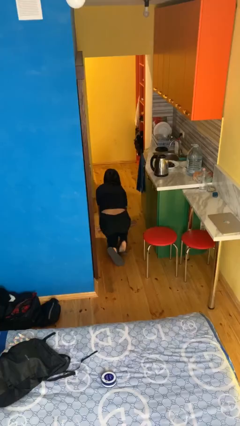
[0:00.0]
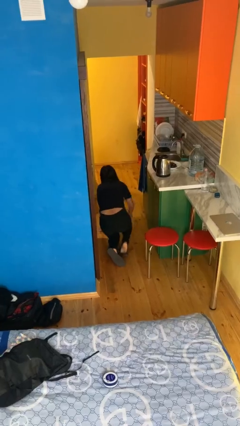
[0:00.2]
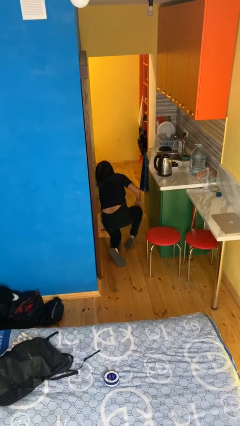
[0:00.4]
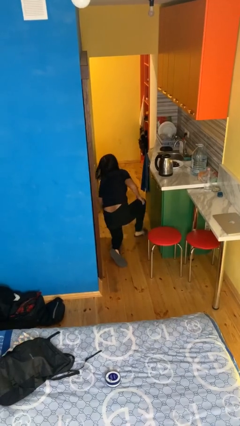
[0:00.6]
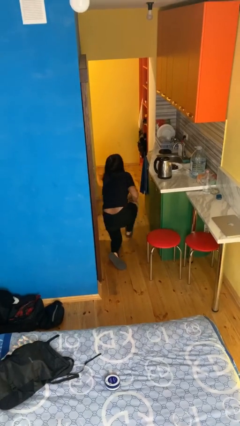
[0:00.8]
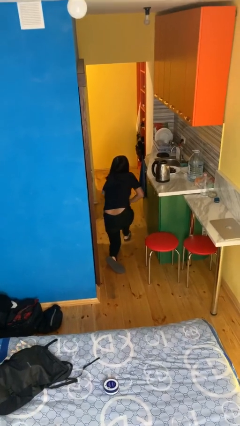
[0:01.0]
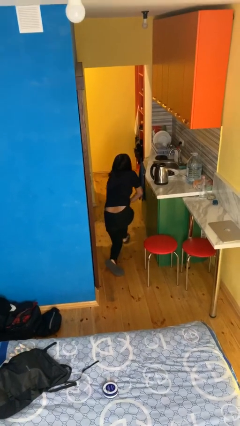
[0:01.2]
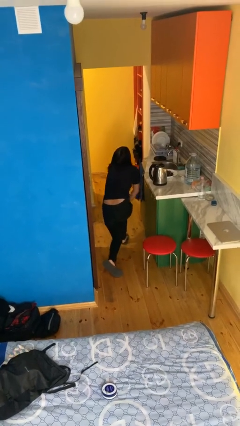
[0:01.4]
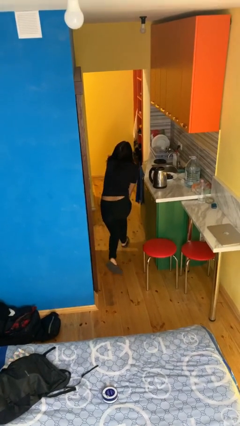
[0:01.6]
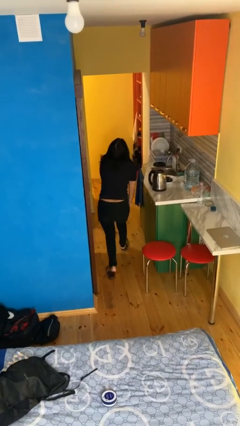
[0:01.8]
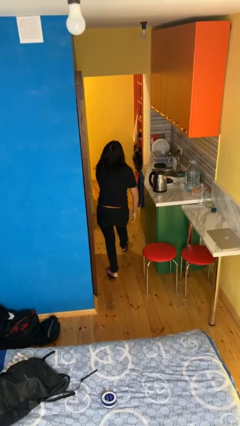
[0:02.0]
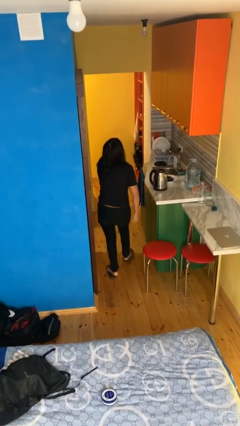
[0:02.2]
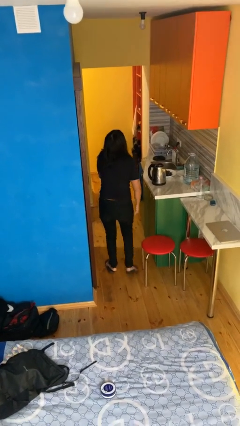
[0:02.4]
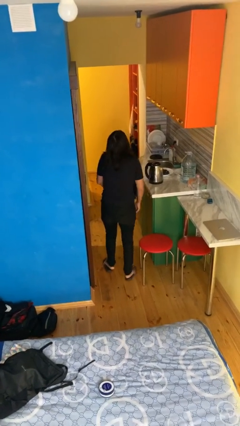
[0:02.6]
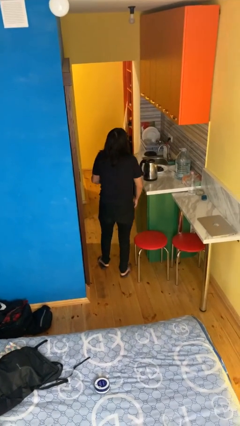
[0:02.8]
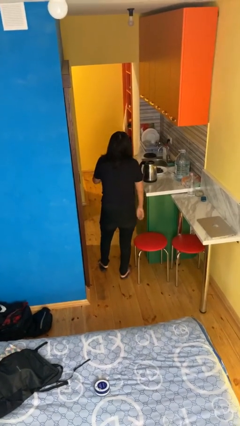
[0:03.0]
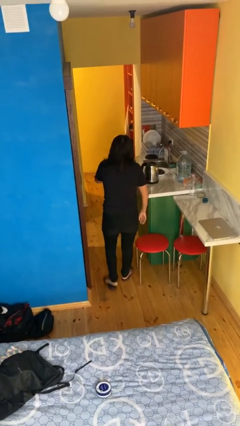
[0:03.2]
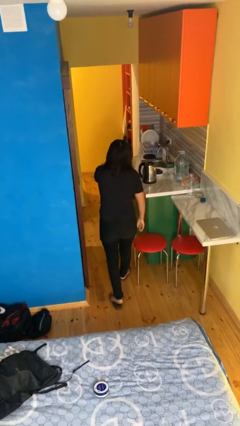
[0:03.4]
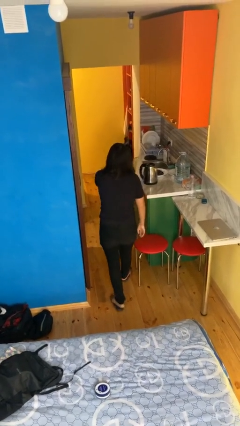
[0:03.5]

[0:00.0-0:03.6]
person stands up from floor

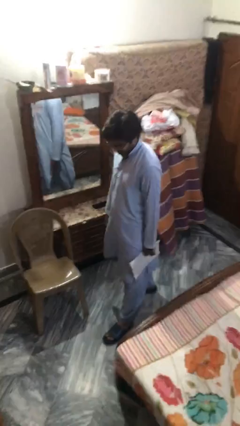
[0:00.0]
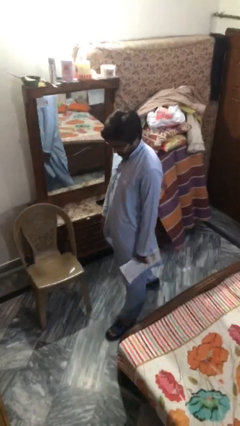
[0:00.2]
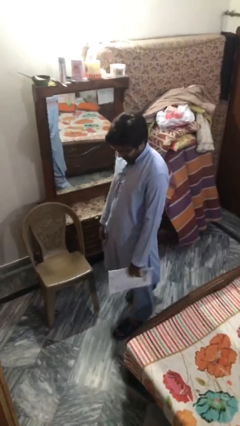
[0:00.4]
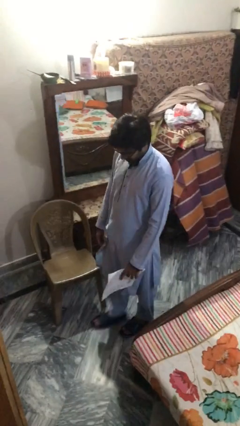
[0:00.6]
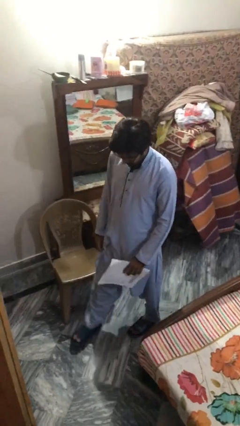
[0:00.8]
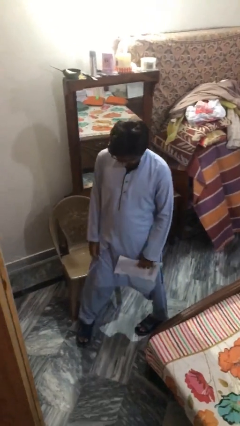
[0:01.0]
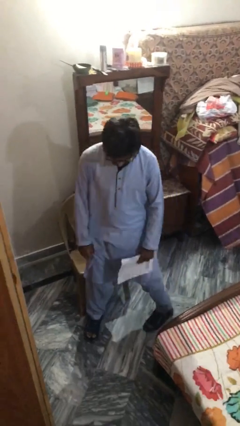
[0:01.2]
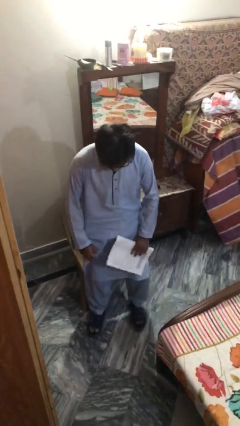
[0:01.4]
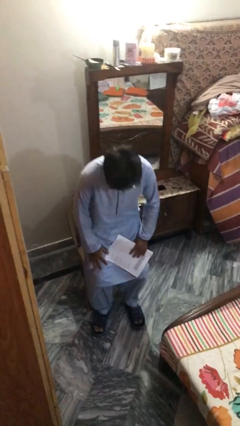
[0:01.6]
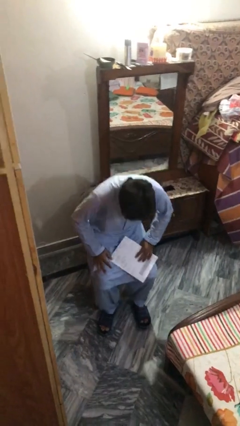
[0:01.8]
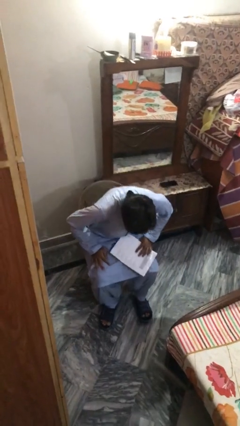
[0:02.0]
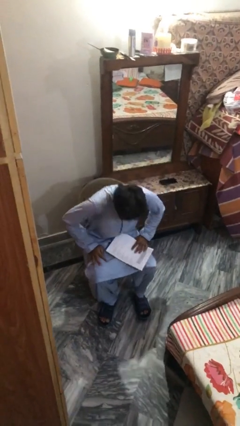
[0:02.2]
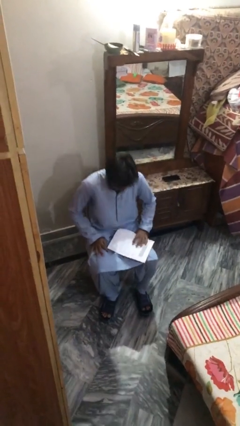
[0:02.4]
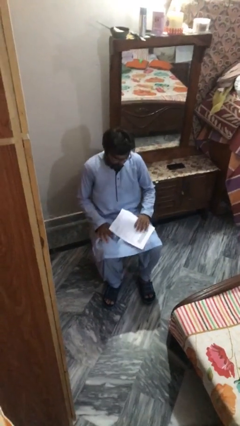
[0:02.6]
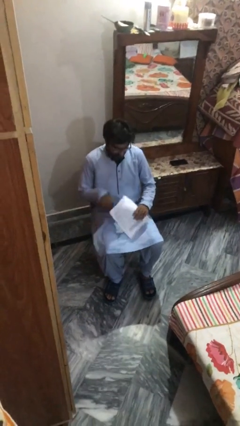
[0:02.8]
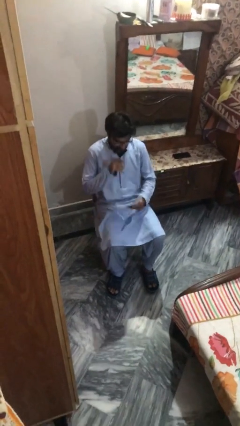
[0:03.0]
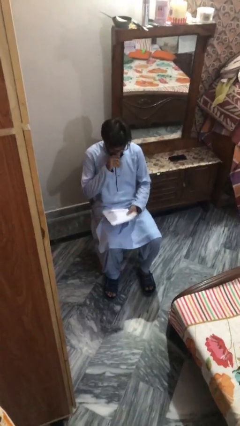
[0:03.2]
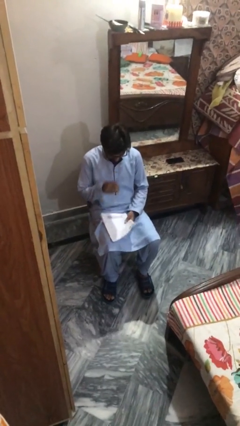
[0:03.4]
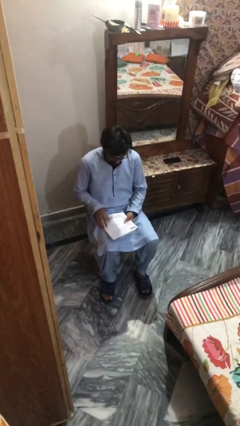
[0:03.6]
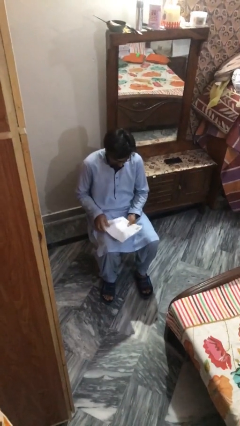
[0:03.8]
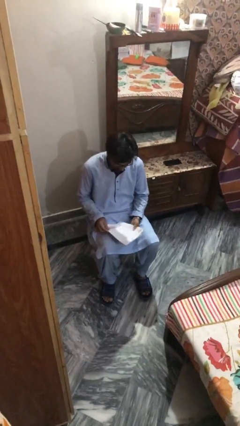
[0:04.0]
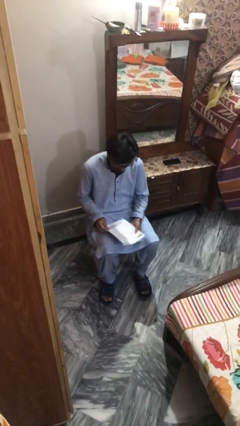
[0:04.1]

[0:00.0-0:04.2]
person sits down

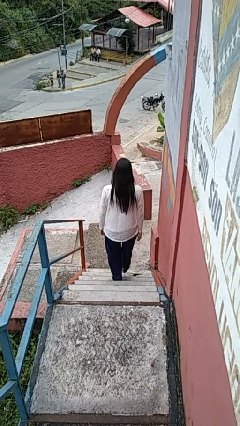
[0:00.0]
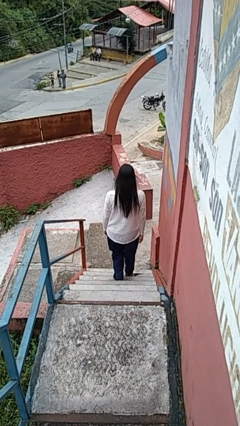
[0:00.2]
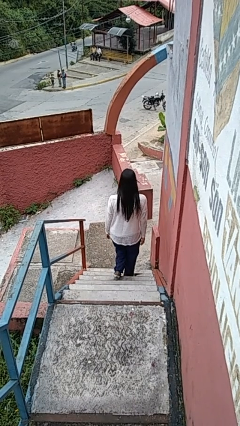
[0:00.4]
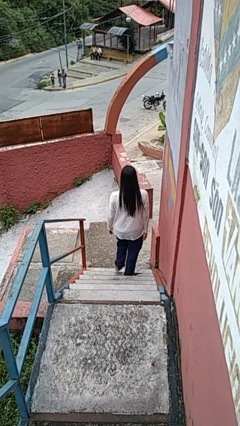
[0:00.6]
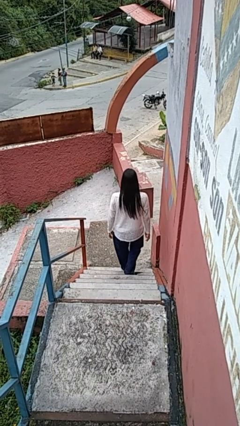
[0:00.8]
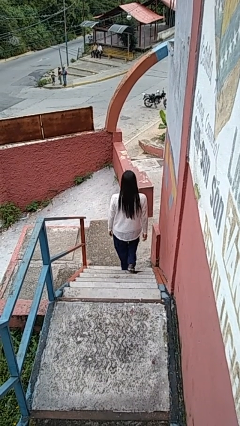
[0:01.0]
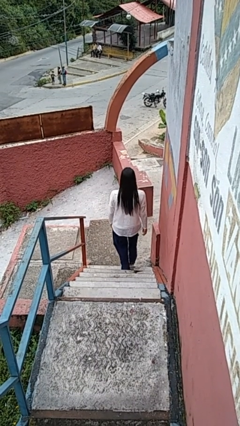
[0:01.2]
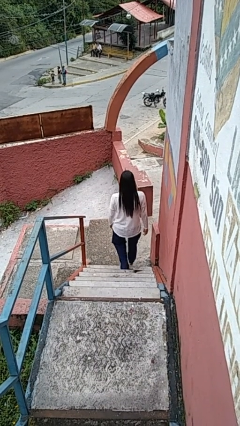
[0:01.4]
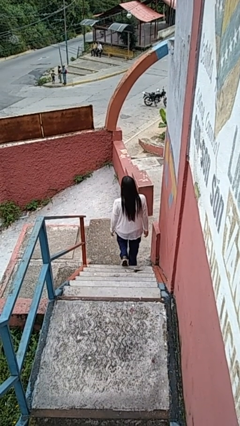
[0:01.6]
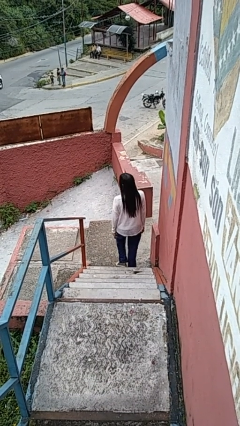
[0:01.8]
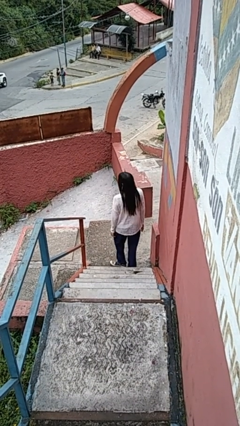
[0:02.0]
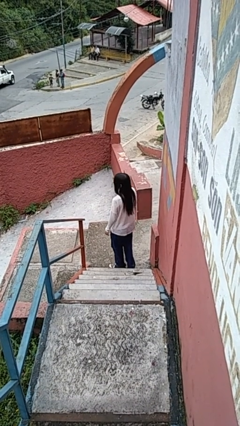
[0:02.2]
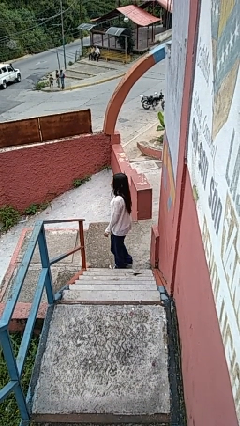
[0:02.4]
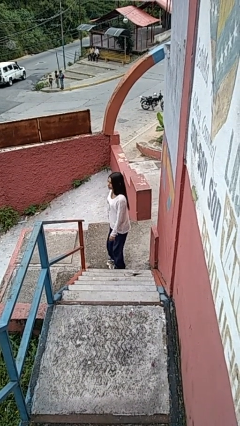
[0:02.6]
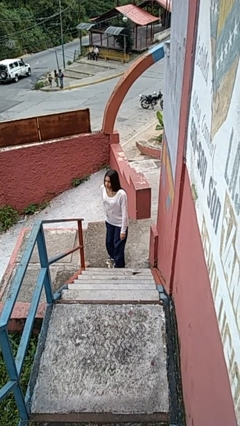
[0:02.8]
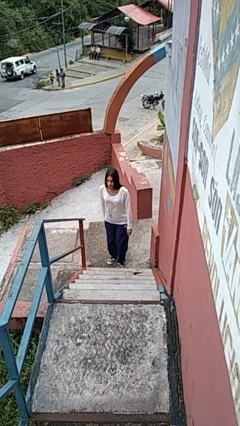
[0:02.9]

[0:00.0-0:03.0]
person climbs down stairs

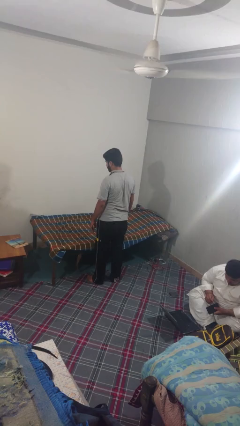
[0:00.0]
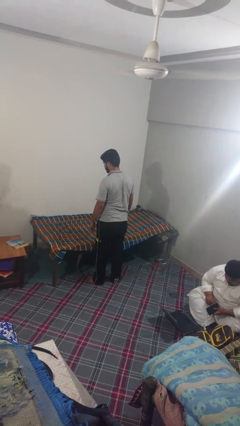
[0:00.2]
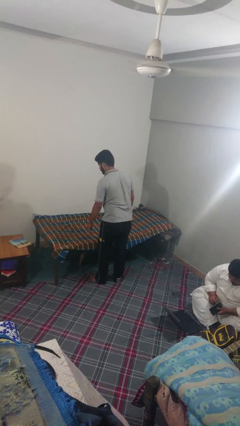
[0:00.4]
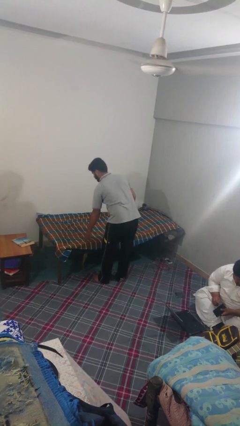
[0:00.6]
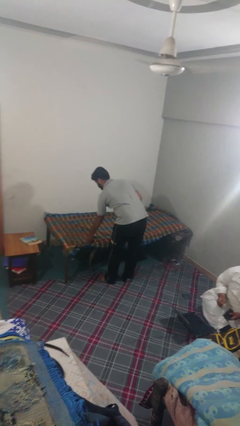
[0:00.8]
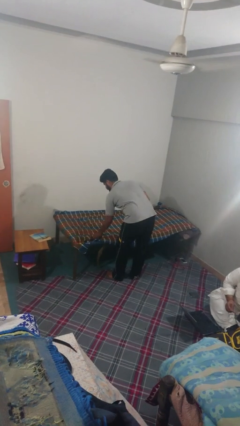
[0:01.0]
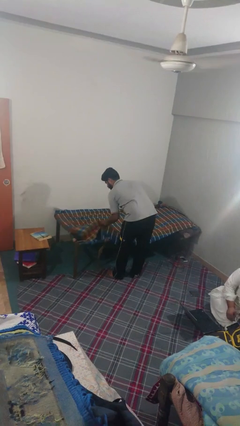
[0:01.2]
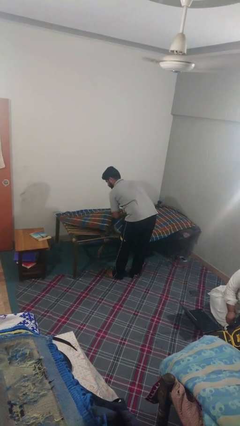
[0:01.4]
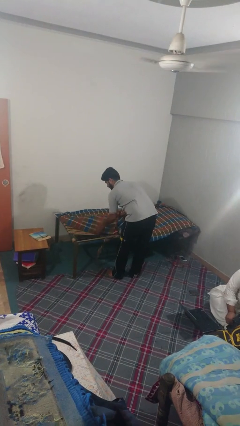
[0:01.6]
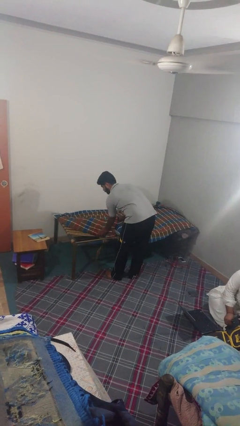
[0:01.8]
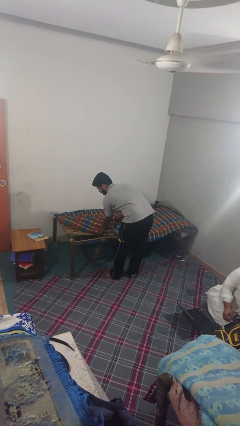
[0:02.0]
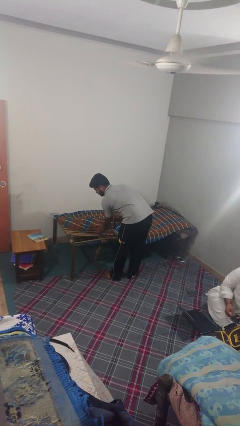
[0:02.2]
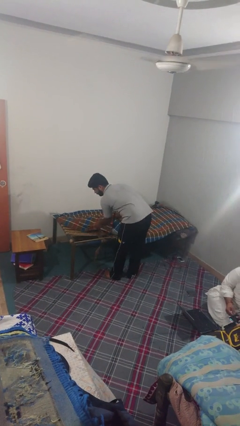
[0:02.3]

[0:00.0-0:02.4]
person makes bed

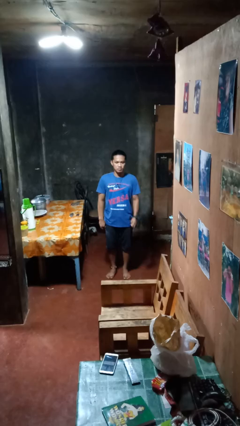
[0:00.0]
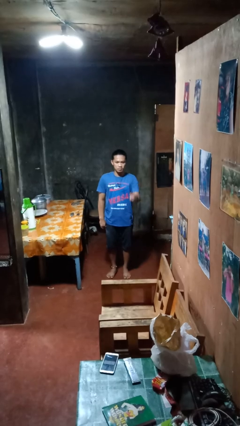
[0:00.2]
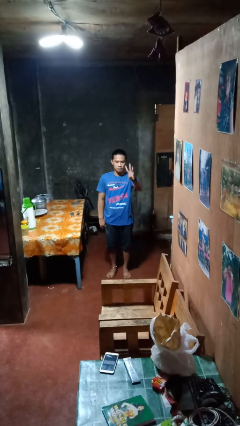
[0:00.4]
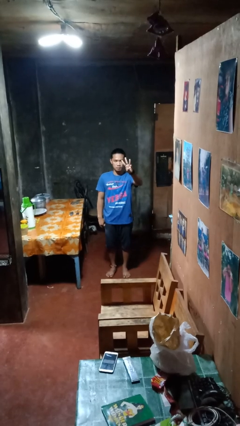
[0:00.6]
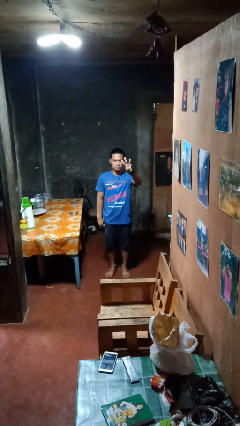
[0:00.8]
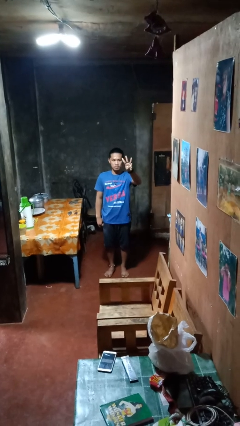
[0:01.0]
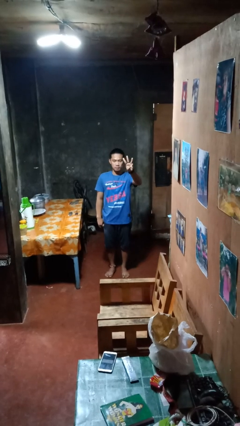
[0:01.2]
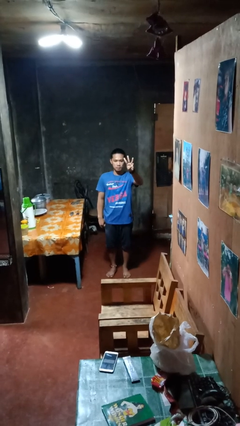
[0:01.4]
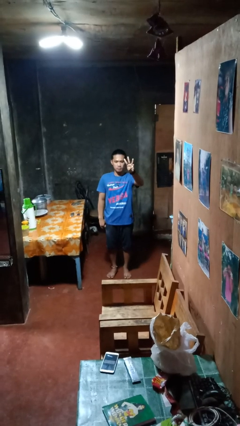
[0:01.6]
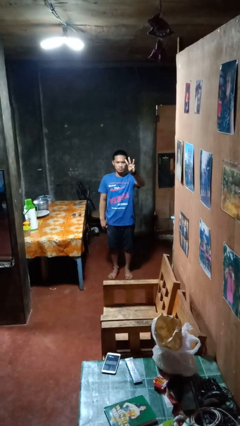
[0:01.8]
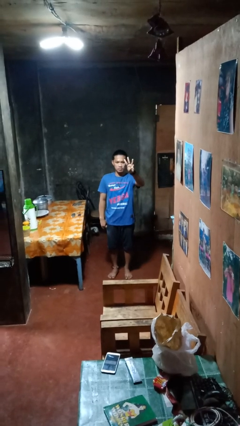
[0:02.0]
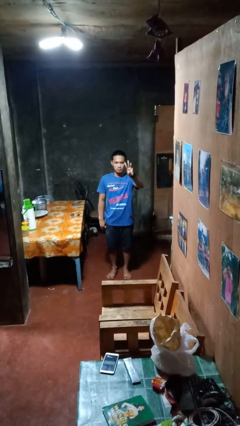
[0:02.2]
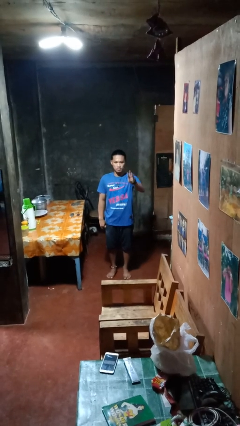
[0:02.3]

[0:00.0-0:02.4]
person gestures number three

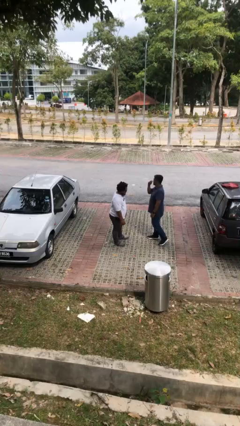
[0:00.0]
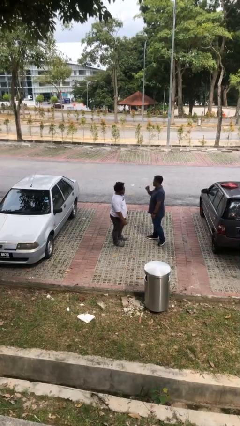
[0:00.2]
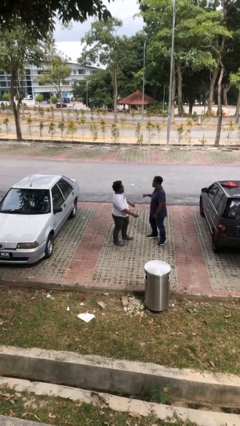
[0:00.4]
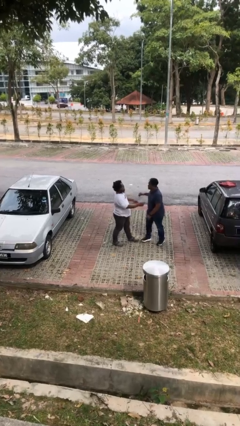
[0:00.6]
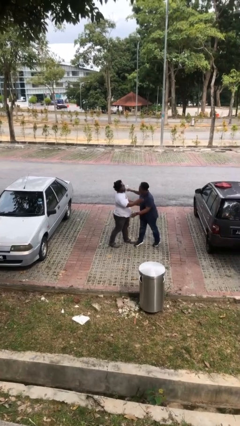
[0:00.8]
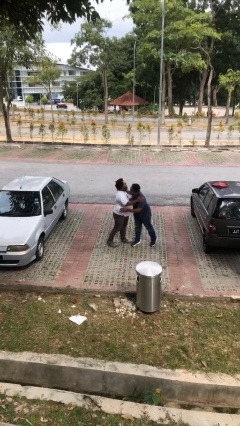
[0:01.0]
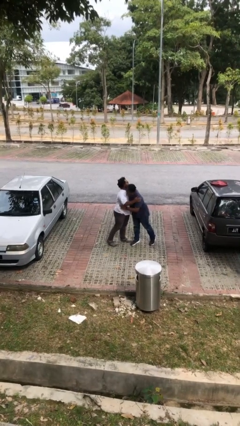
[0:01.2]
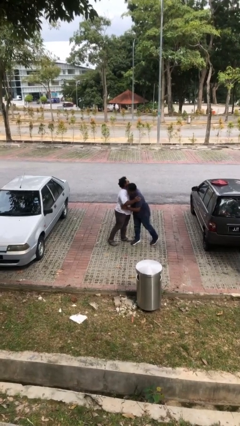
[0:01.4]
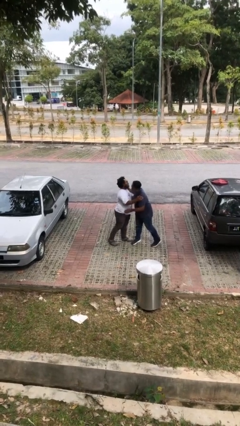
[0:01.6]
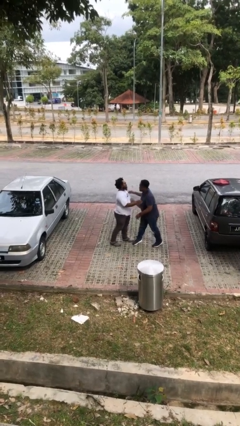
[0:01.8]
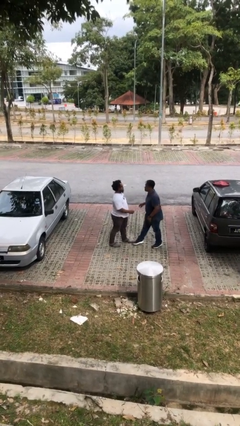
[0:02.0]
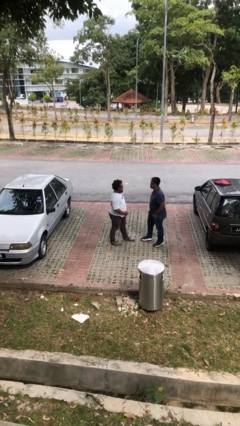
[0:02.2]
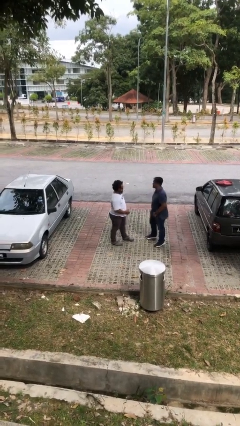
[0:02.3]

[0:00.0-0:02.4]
person embraces person
